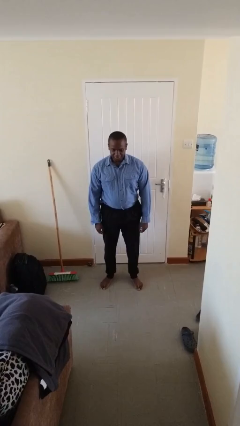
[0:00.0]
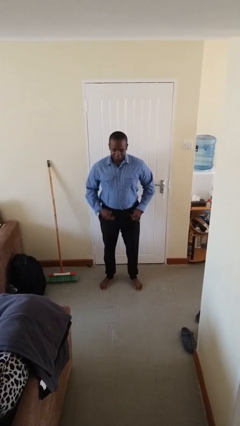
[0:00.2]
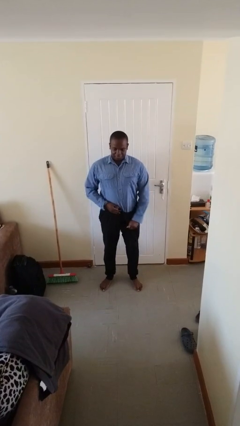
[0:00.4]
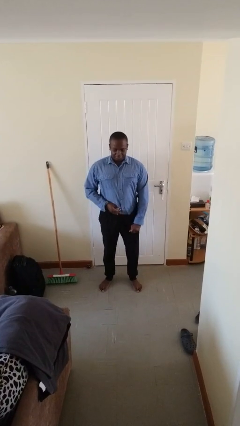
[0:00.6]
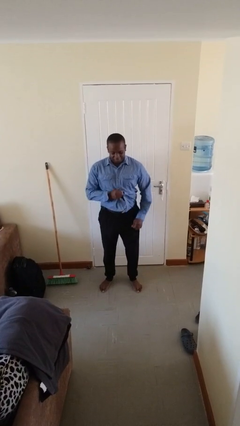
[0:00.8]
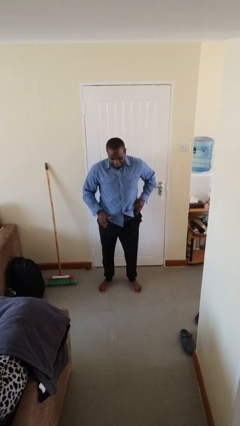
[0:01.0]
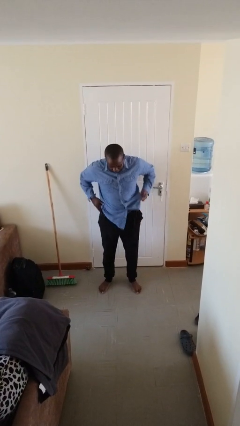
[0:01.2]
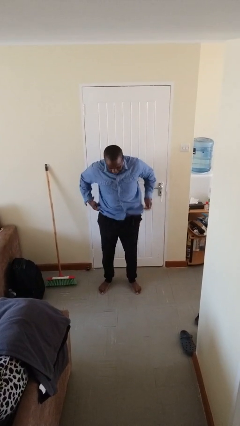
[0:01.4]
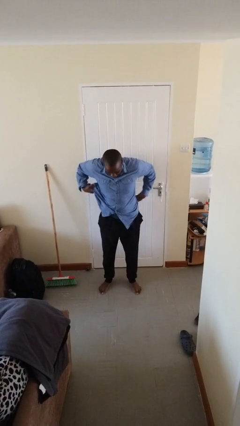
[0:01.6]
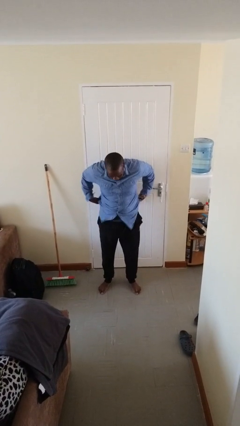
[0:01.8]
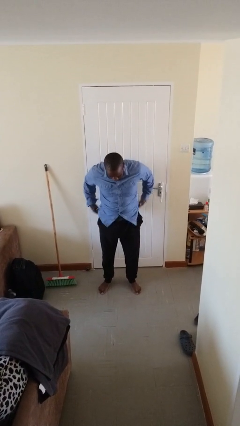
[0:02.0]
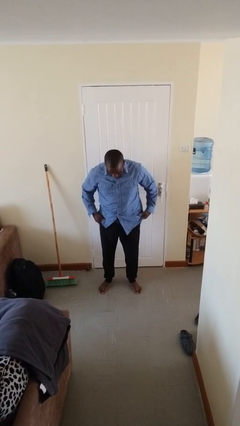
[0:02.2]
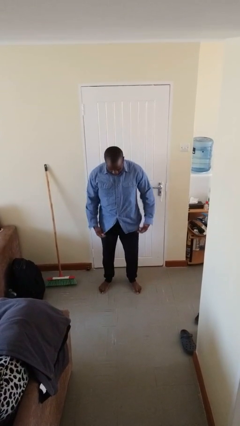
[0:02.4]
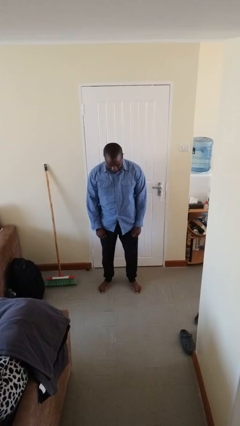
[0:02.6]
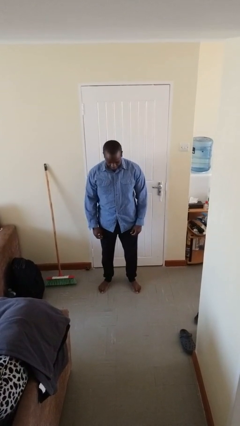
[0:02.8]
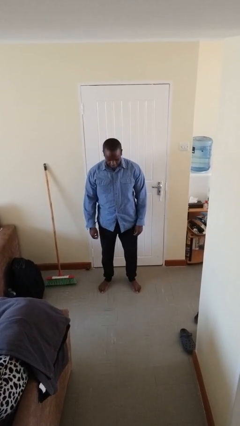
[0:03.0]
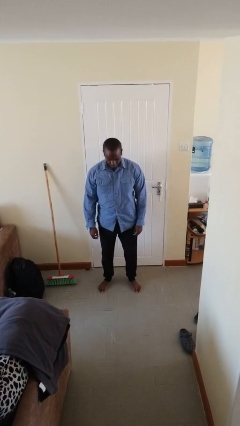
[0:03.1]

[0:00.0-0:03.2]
person untucks shirt

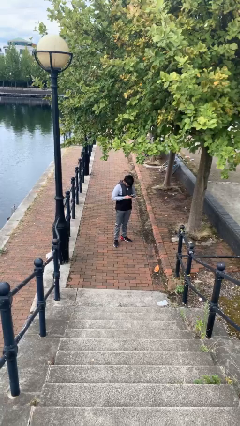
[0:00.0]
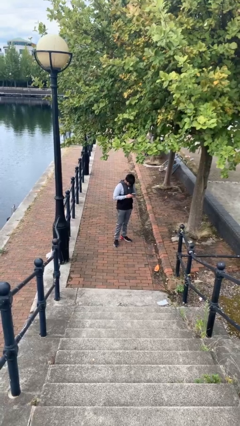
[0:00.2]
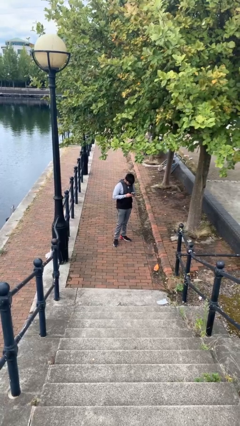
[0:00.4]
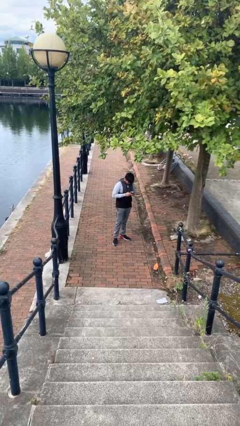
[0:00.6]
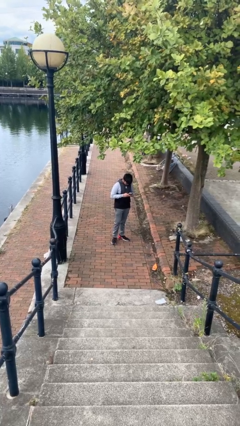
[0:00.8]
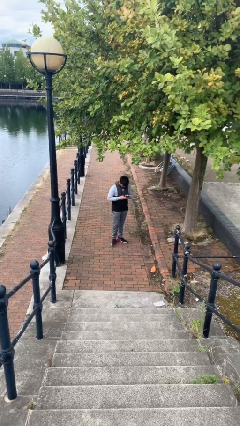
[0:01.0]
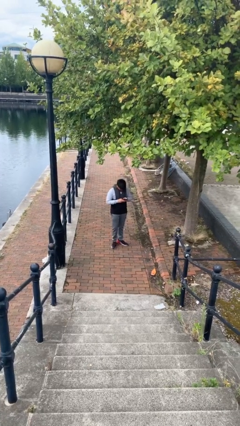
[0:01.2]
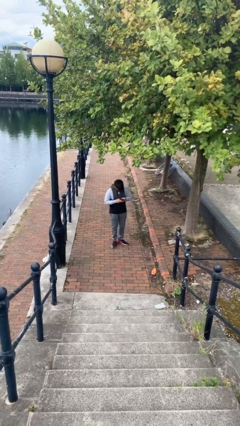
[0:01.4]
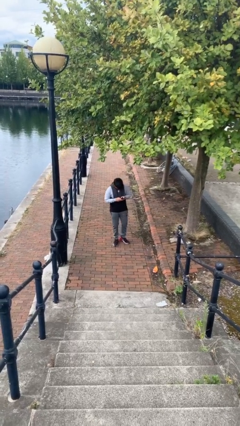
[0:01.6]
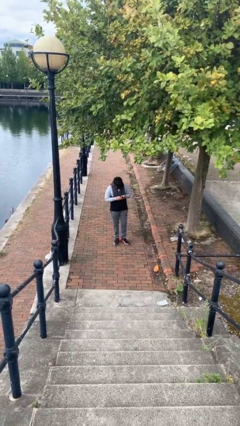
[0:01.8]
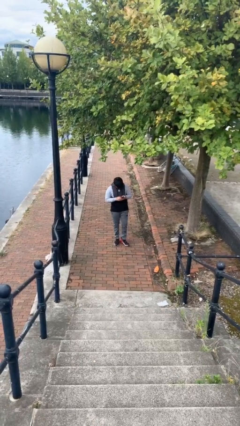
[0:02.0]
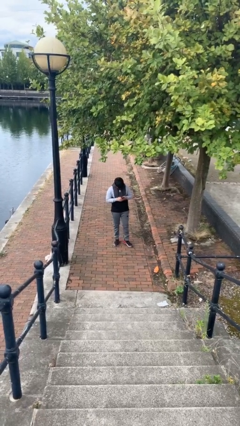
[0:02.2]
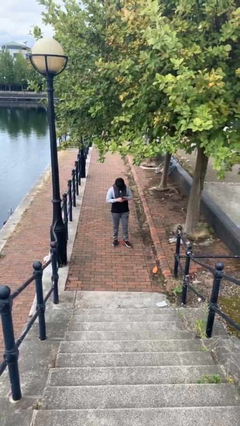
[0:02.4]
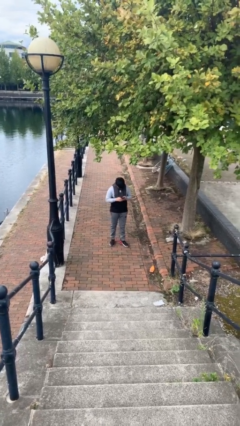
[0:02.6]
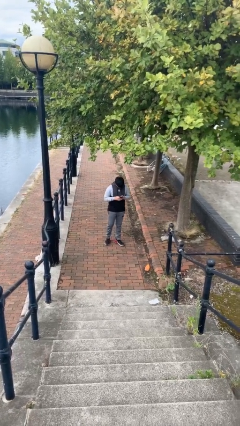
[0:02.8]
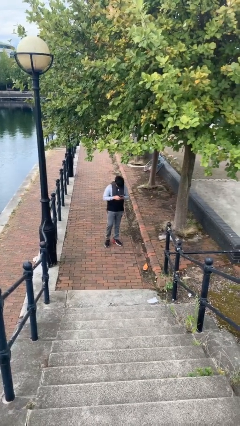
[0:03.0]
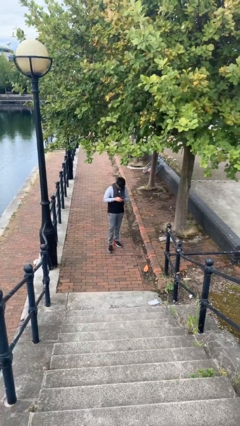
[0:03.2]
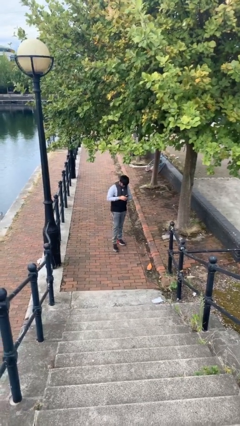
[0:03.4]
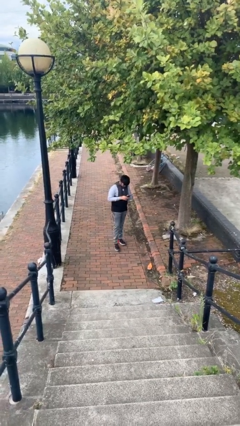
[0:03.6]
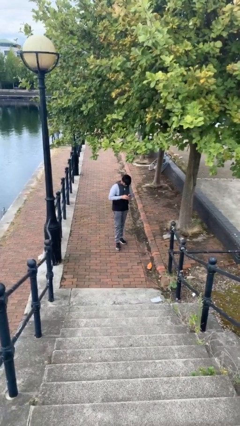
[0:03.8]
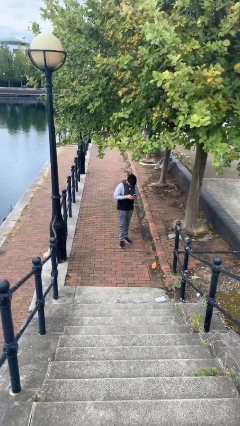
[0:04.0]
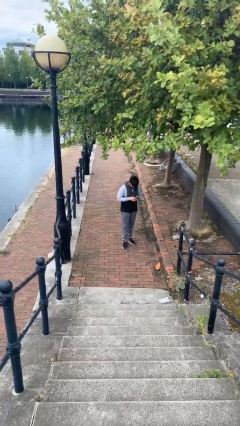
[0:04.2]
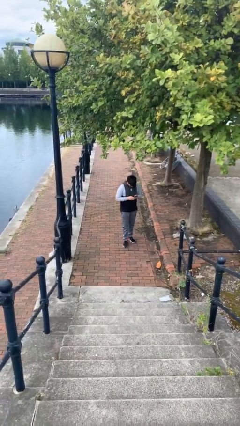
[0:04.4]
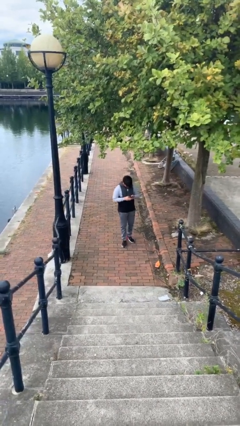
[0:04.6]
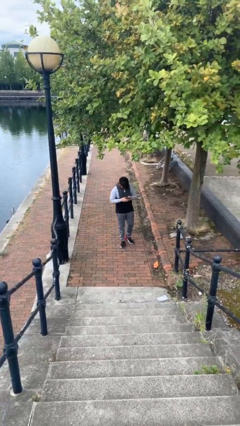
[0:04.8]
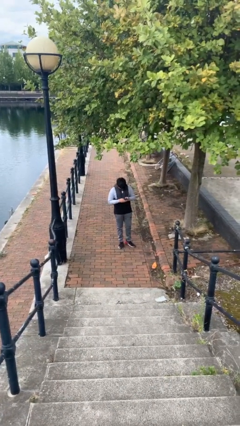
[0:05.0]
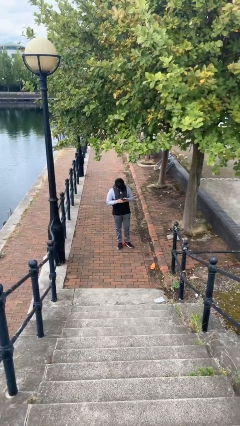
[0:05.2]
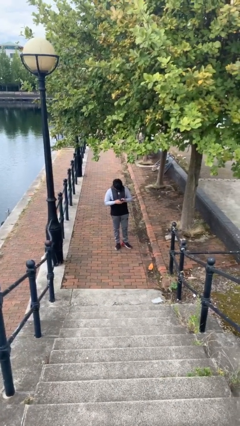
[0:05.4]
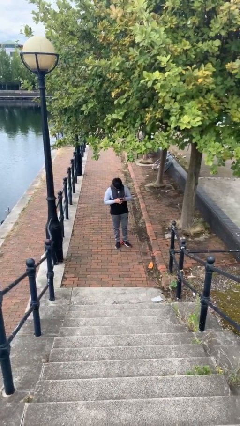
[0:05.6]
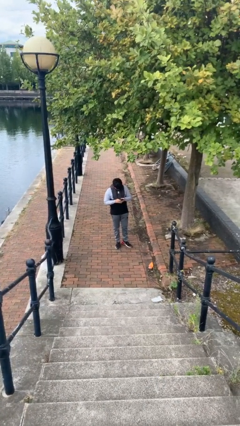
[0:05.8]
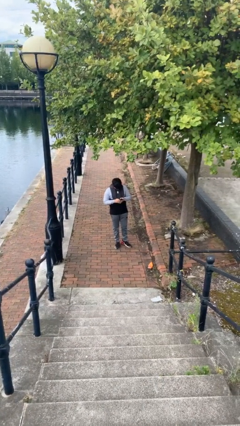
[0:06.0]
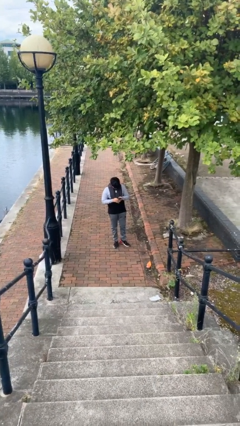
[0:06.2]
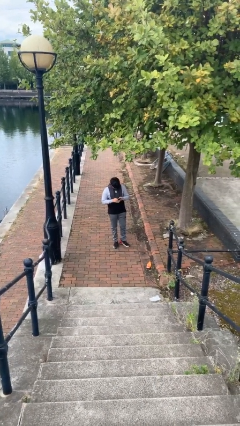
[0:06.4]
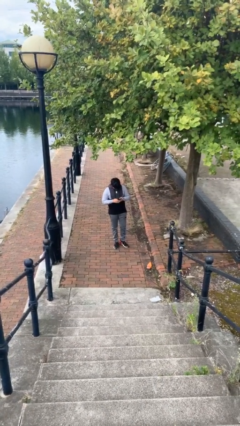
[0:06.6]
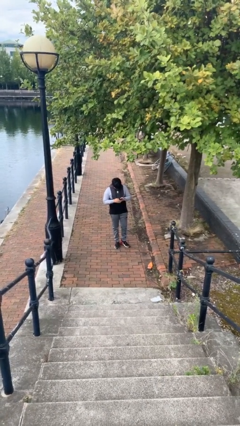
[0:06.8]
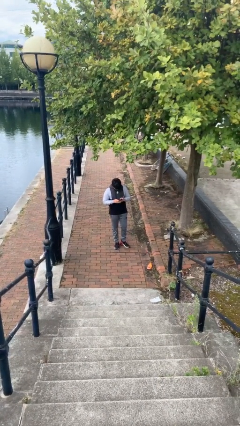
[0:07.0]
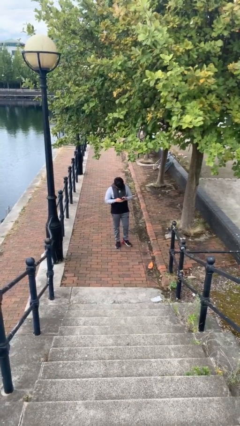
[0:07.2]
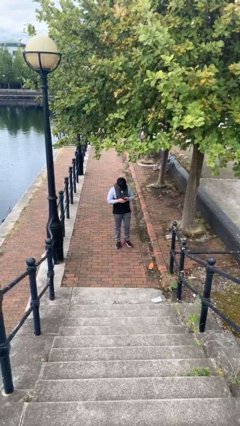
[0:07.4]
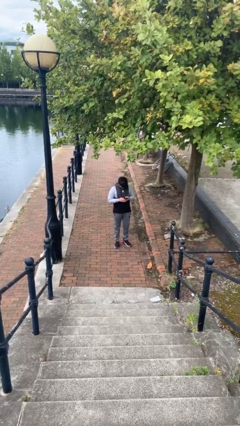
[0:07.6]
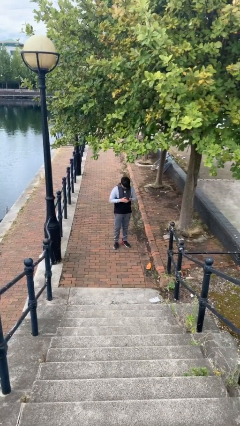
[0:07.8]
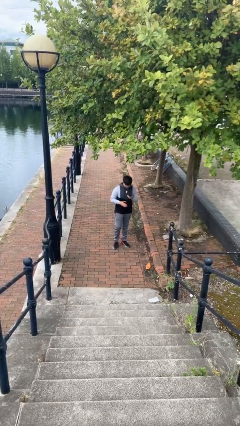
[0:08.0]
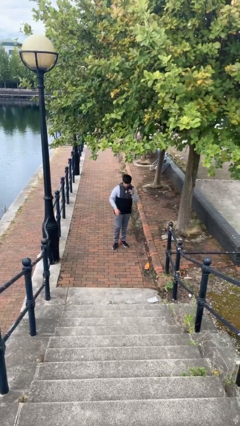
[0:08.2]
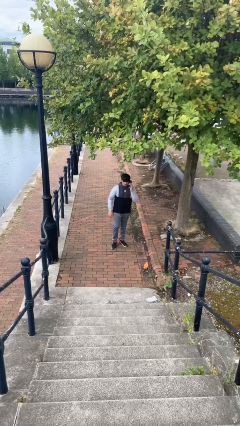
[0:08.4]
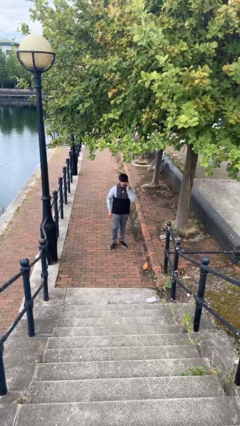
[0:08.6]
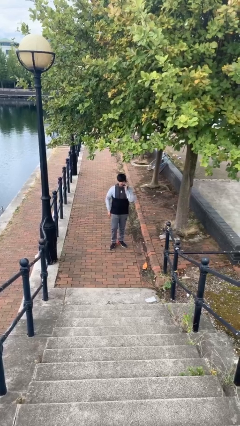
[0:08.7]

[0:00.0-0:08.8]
person texts on phone

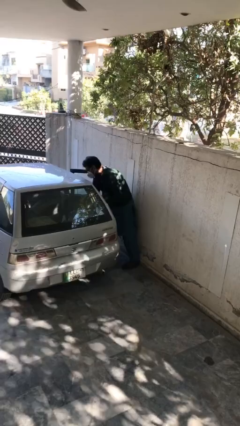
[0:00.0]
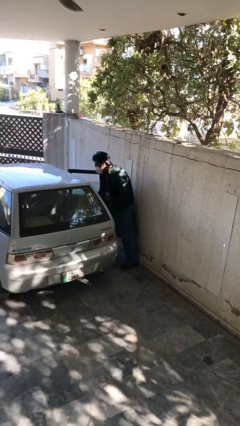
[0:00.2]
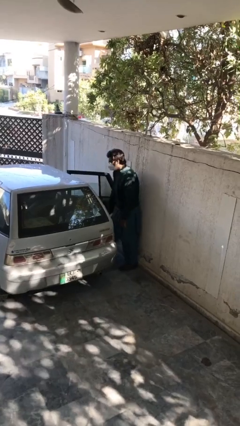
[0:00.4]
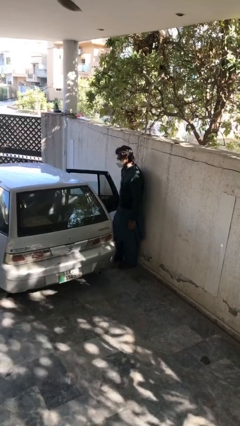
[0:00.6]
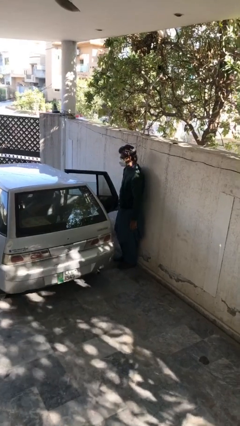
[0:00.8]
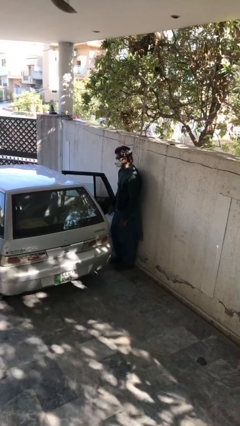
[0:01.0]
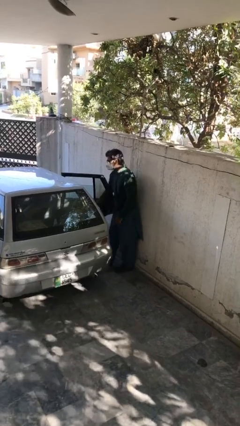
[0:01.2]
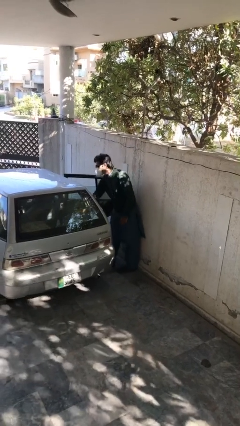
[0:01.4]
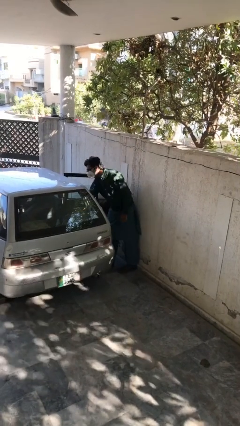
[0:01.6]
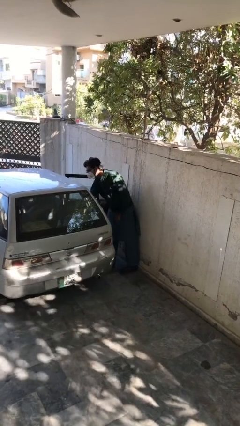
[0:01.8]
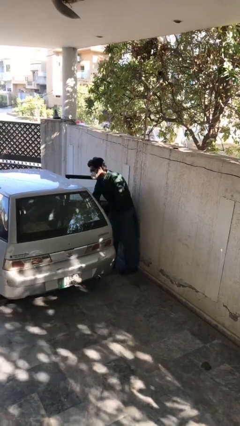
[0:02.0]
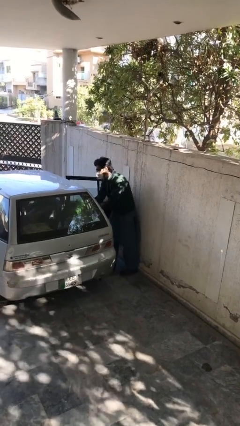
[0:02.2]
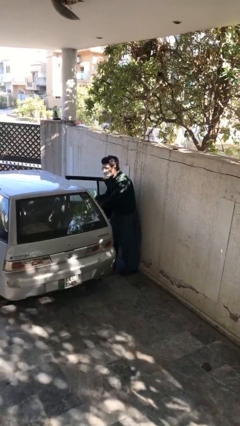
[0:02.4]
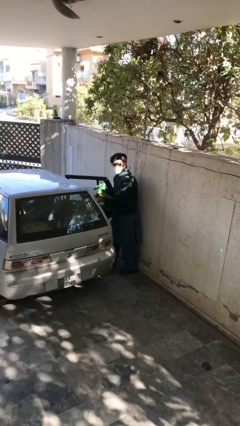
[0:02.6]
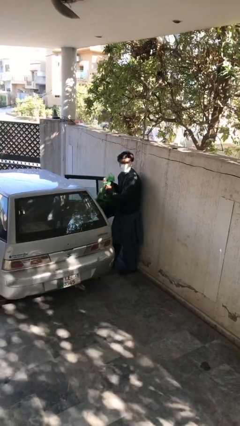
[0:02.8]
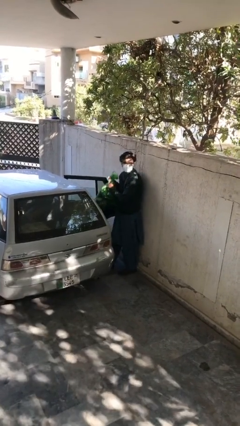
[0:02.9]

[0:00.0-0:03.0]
person unloads car

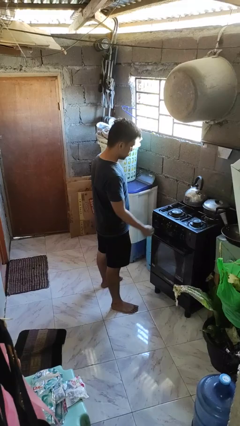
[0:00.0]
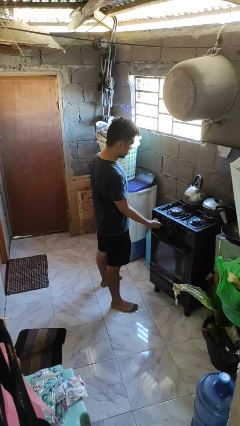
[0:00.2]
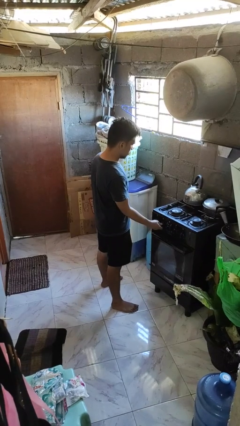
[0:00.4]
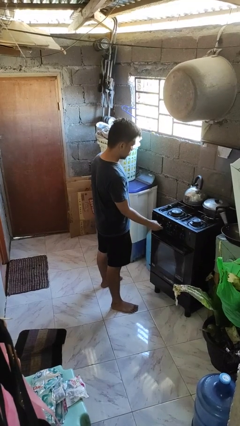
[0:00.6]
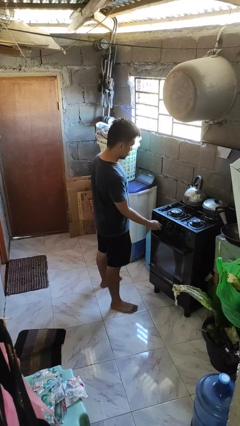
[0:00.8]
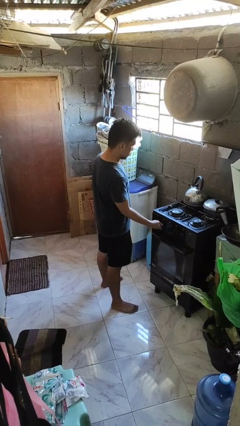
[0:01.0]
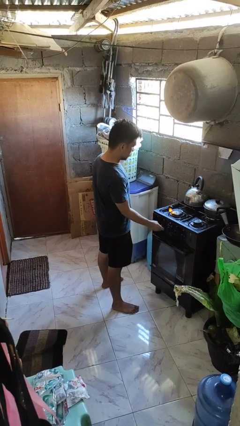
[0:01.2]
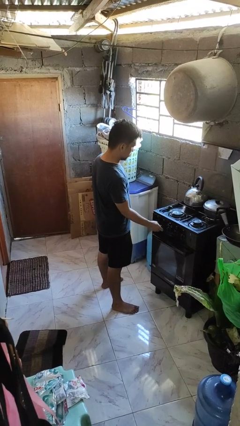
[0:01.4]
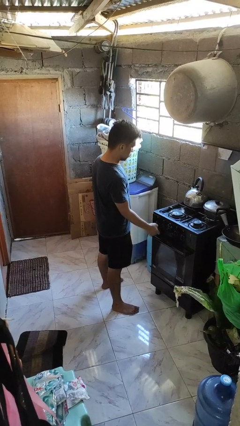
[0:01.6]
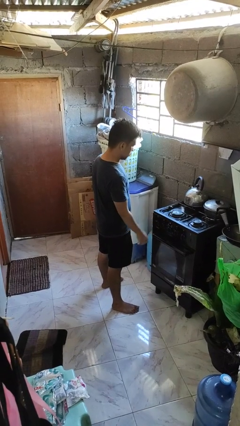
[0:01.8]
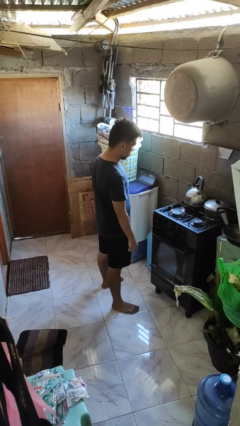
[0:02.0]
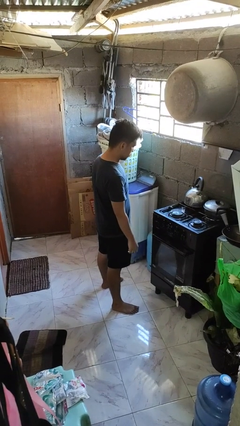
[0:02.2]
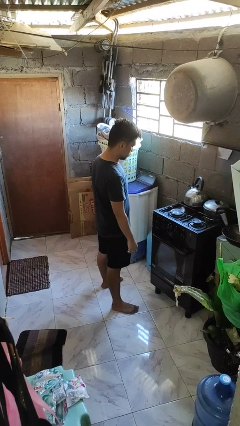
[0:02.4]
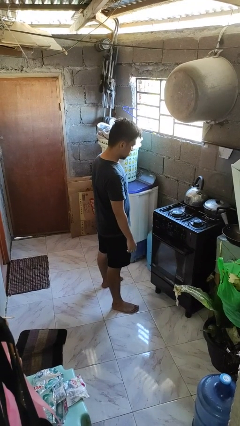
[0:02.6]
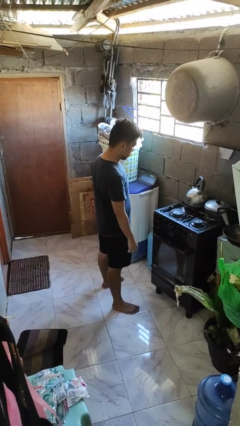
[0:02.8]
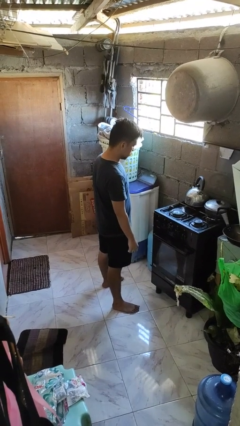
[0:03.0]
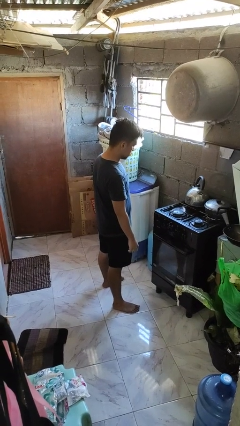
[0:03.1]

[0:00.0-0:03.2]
person turns on stovetop
